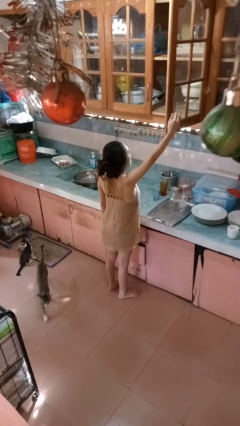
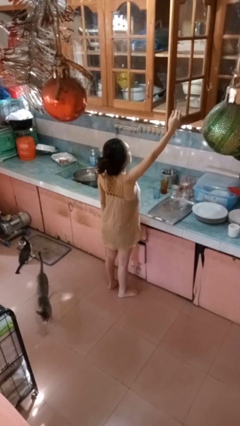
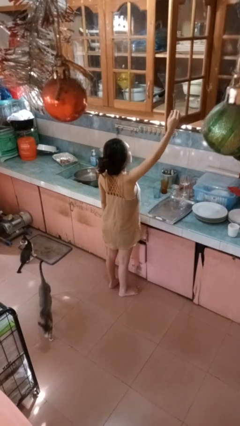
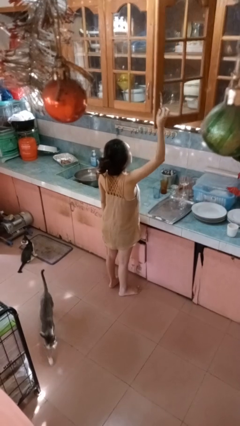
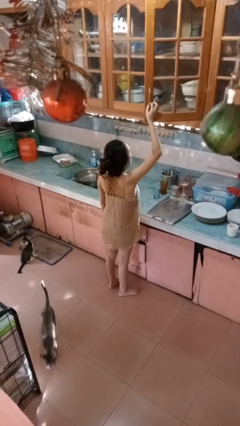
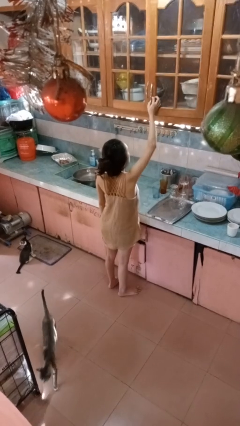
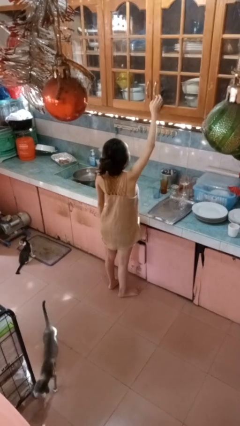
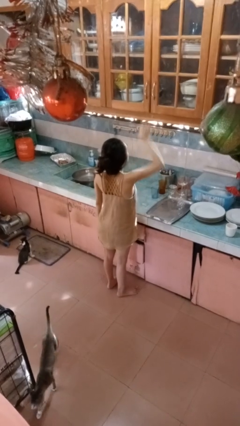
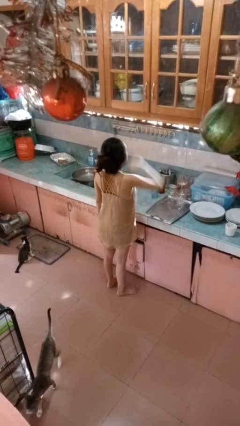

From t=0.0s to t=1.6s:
person closes cabinet

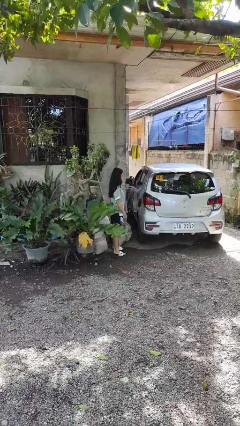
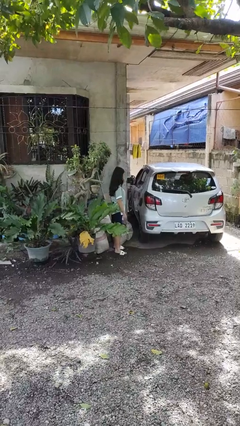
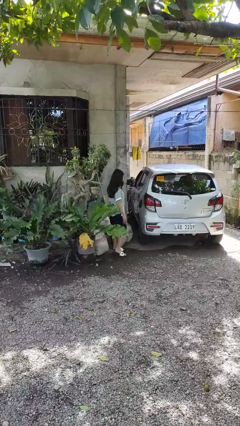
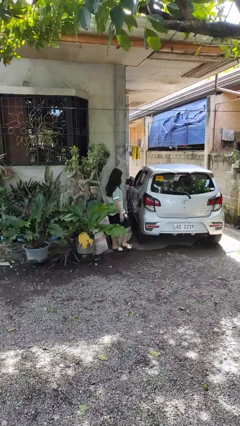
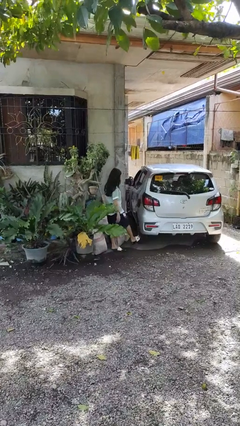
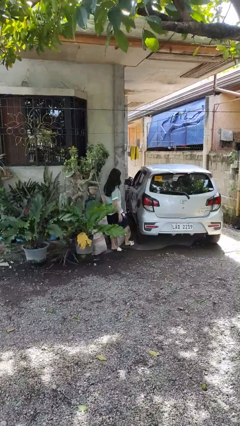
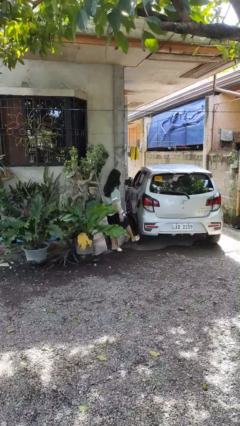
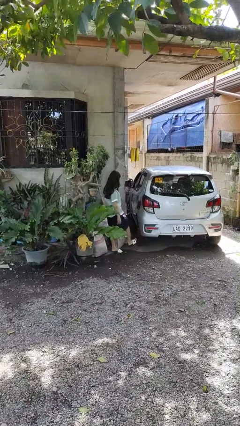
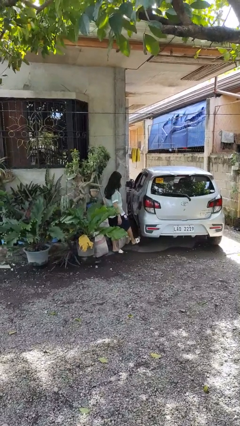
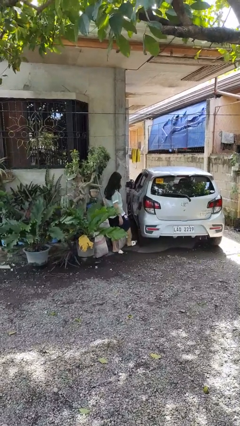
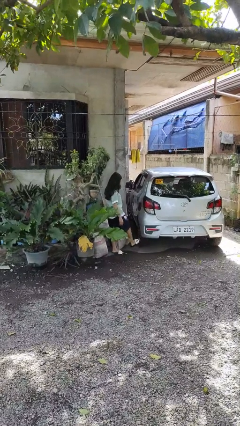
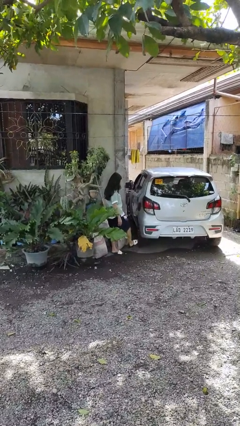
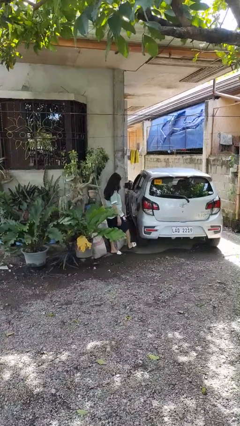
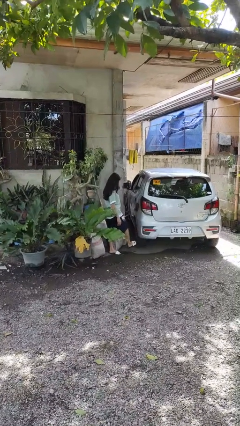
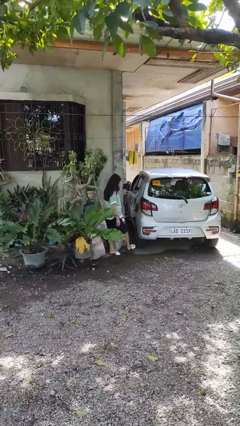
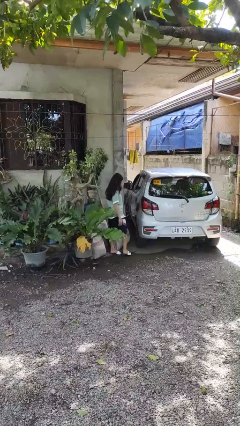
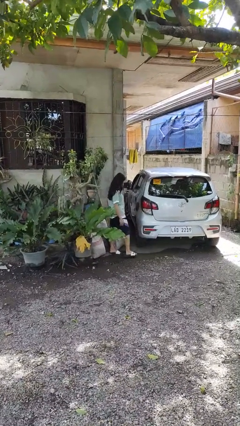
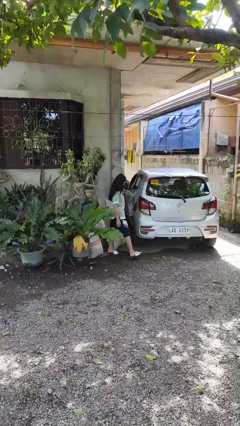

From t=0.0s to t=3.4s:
person kicks car tires

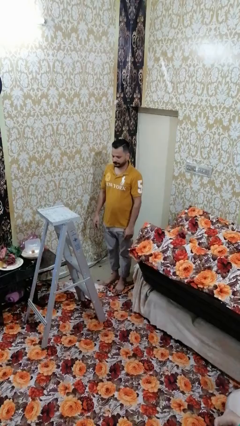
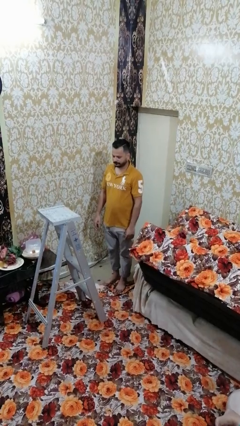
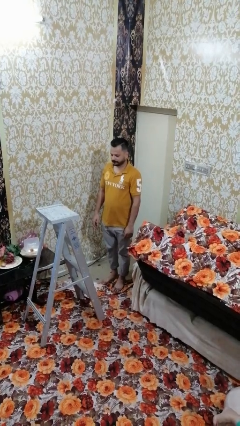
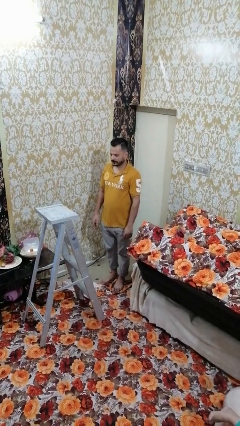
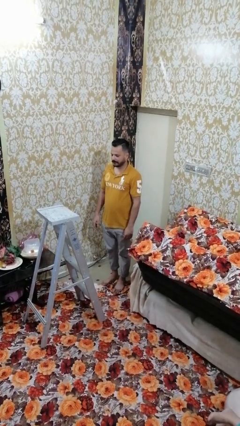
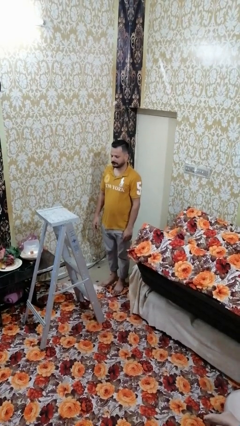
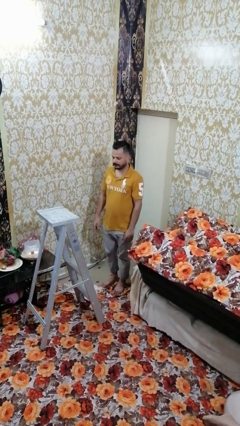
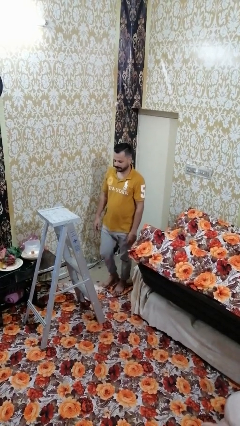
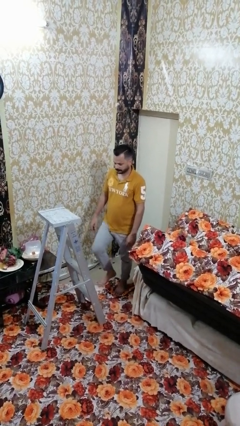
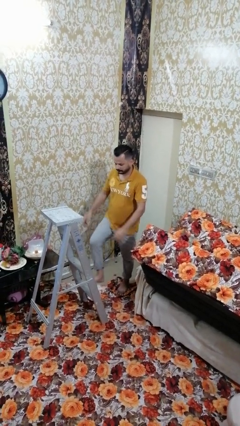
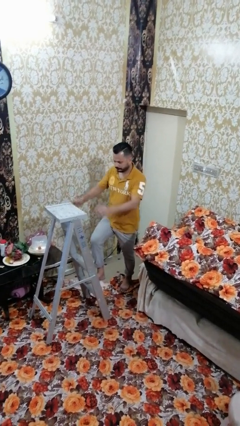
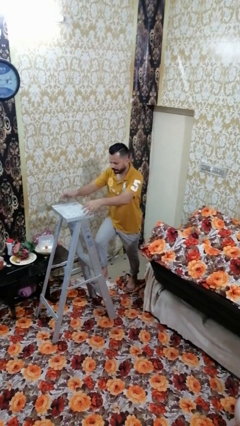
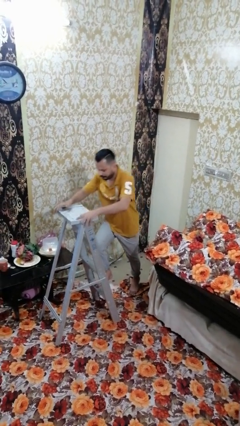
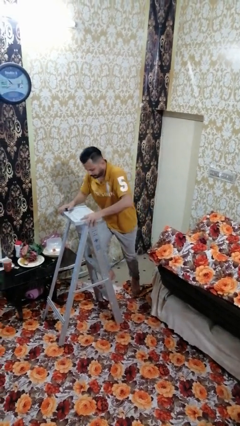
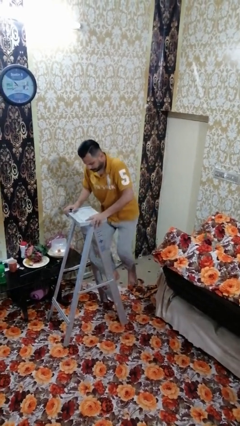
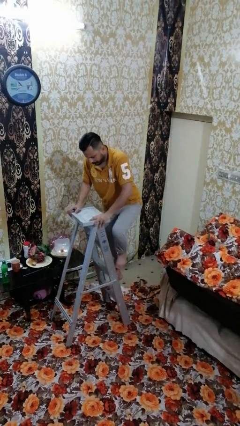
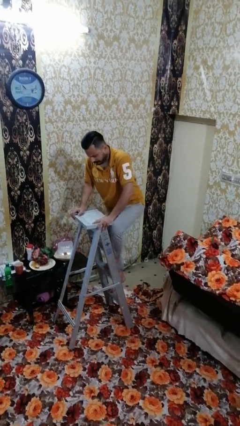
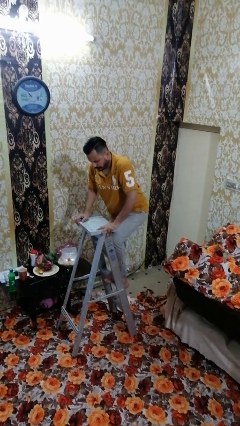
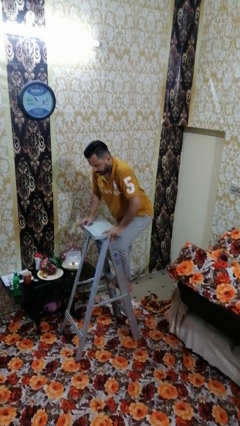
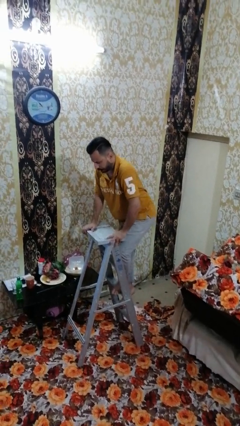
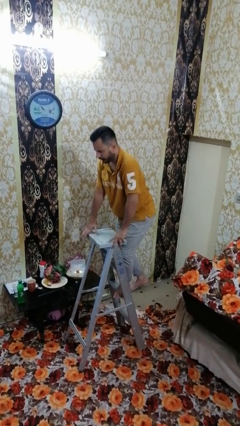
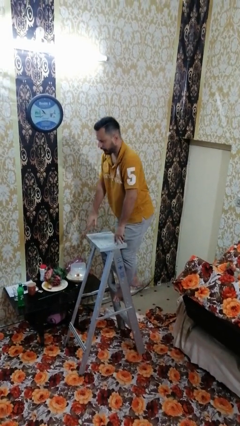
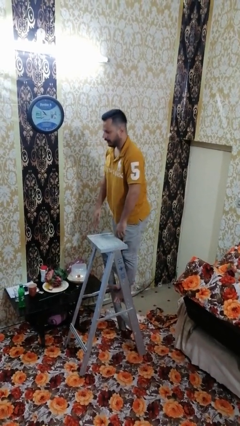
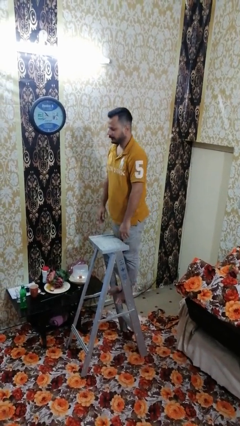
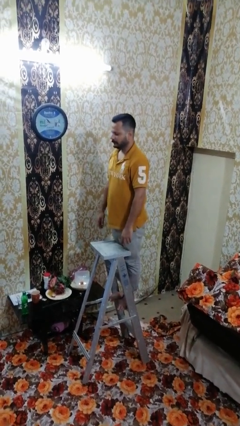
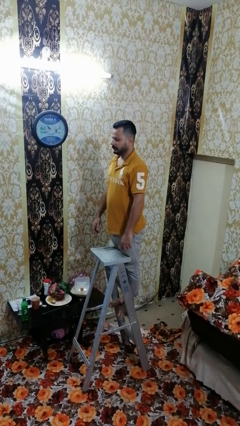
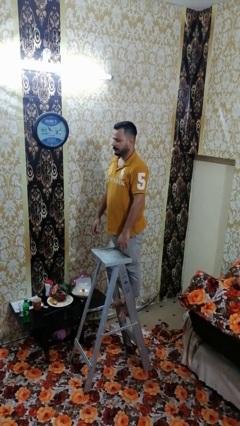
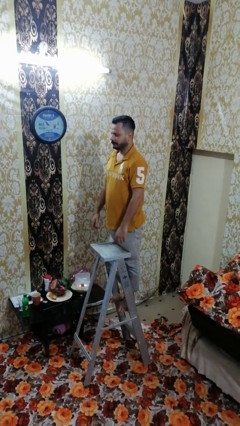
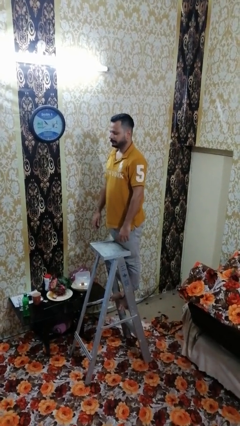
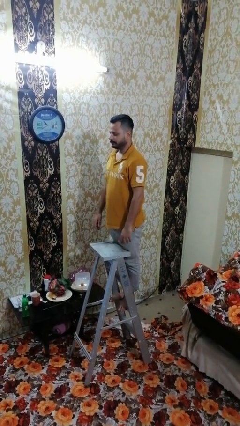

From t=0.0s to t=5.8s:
person climbs up ladder

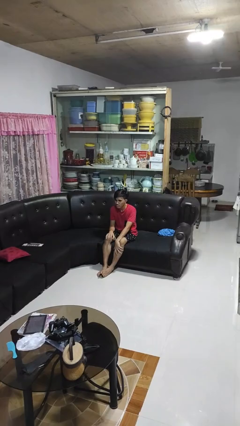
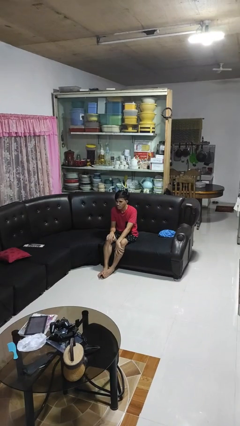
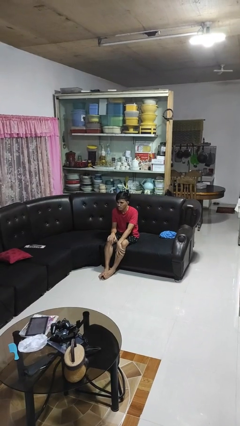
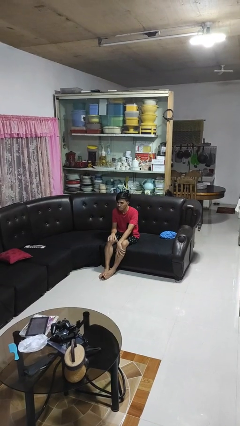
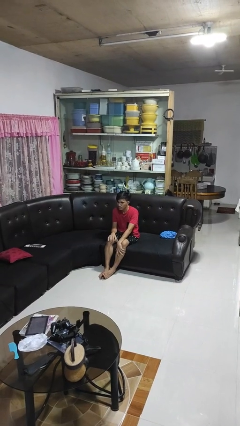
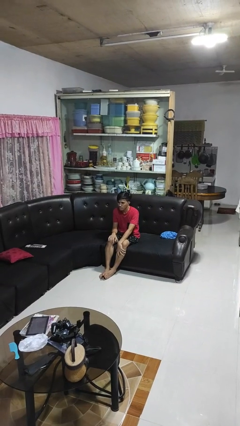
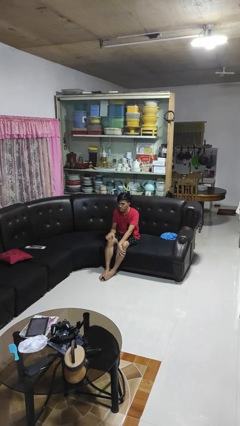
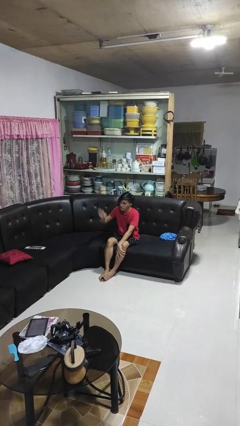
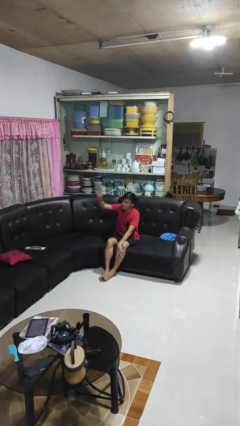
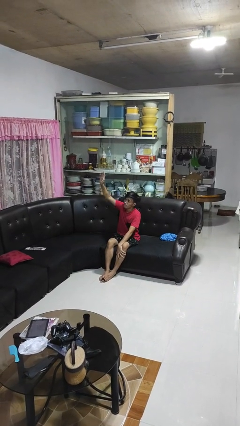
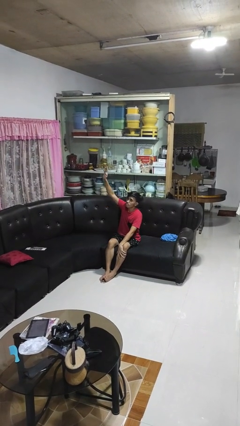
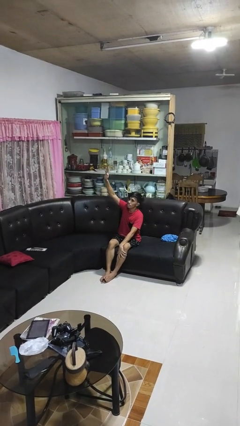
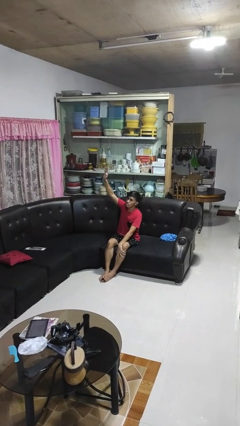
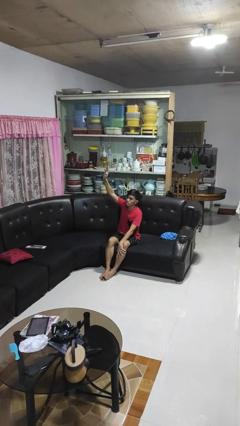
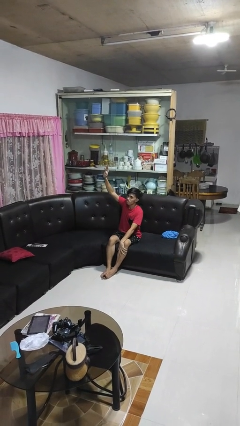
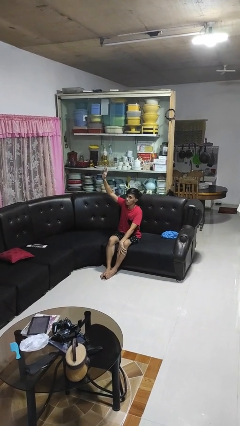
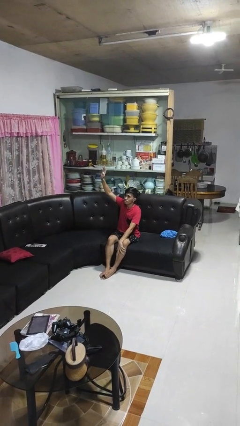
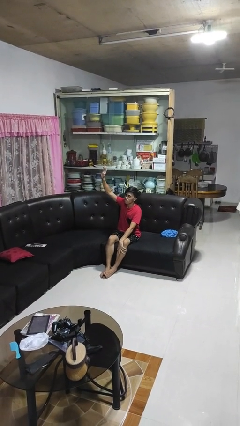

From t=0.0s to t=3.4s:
person gestures raise hand

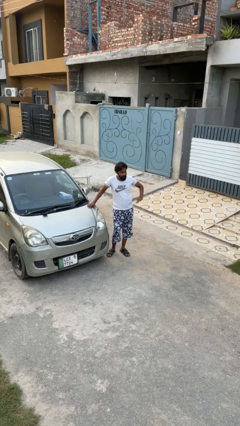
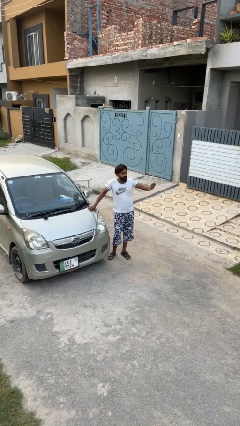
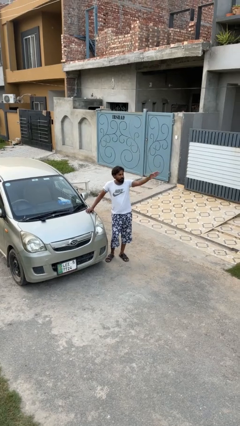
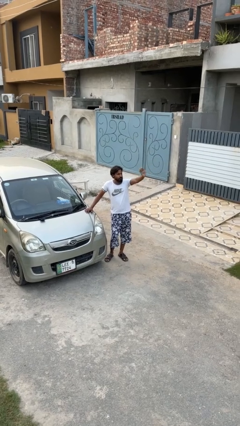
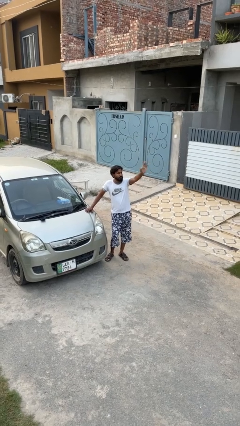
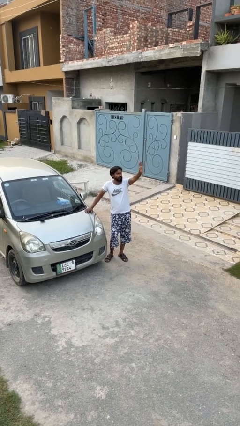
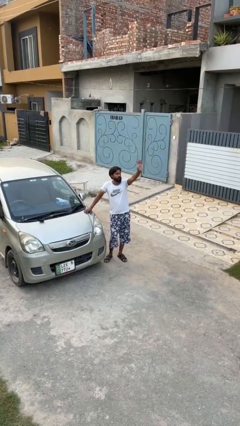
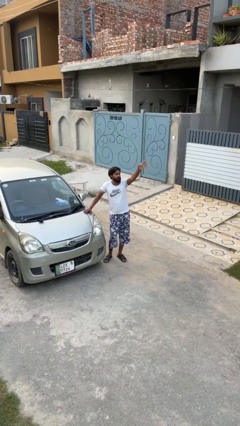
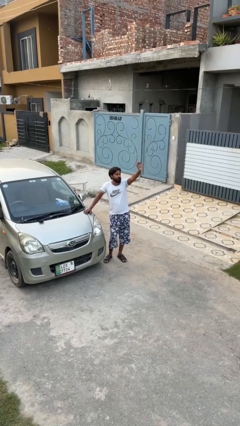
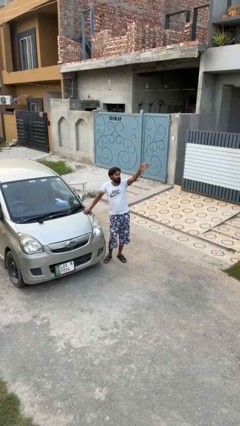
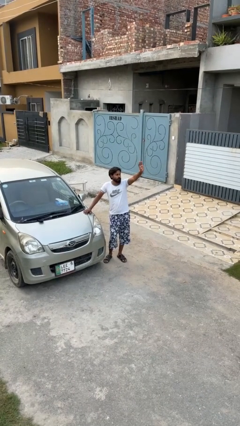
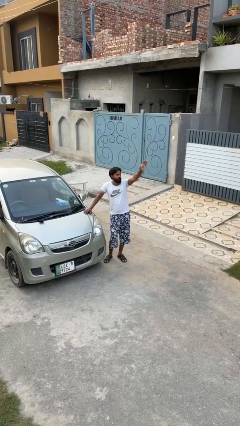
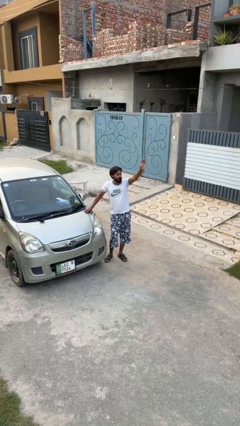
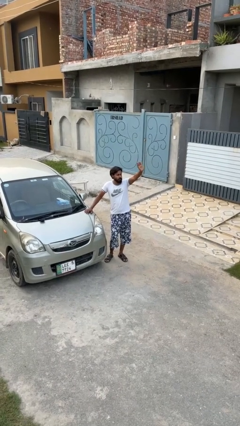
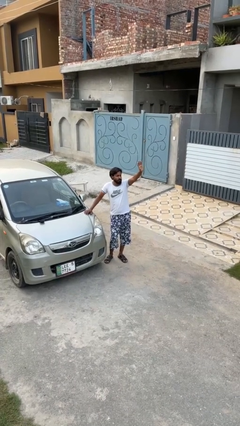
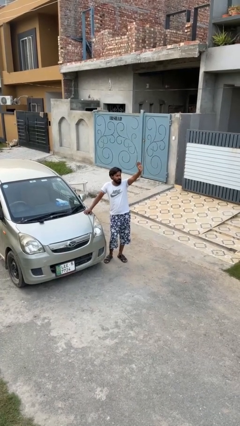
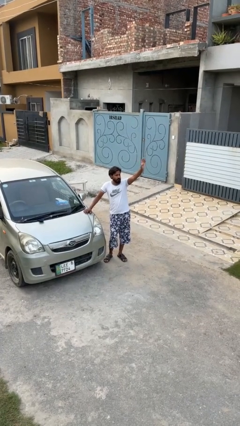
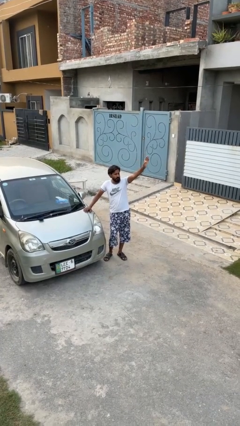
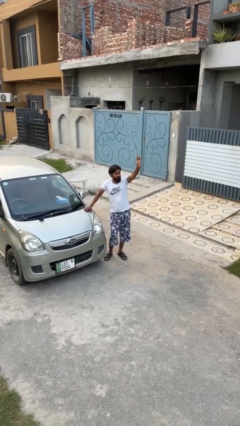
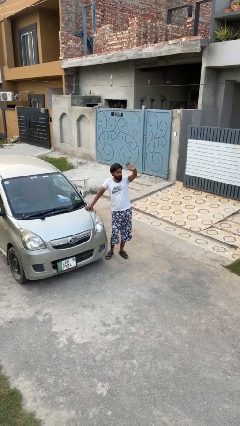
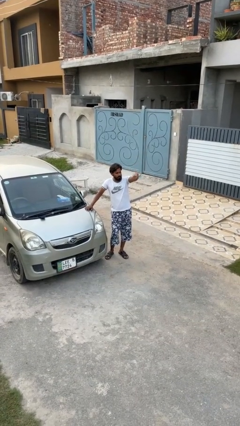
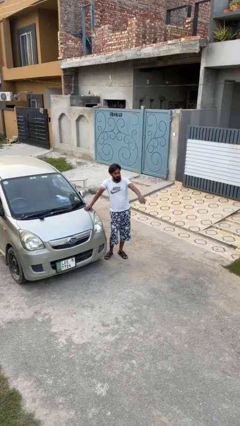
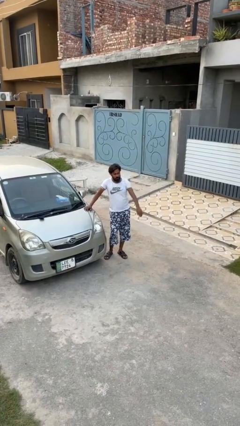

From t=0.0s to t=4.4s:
person waves at person
